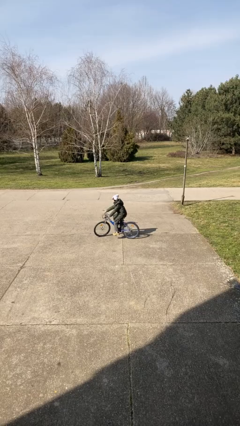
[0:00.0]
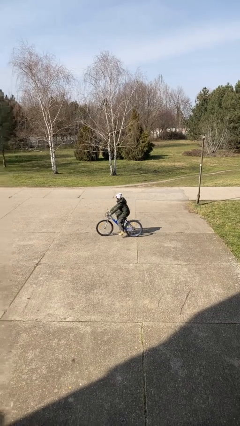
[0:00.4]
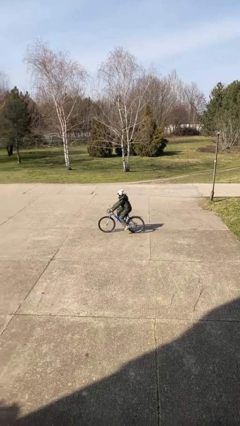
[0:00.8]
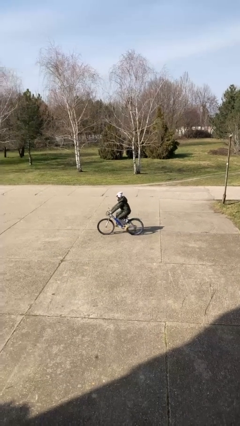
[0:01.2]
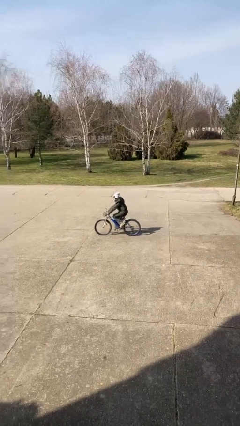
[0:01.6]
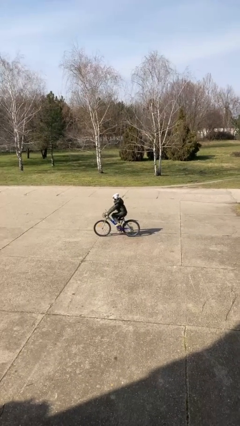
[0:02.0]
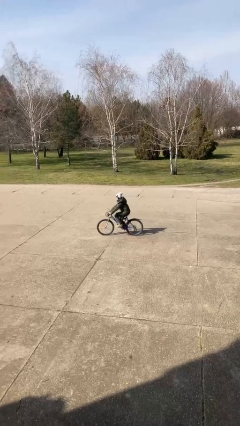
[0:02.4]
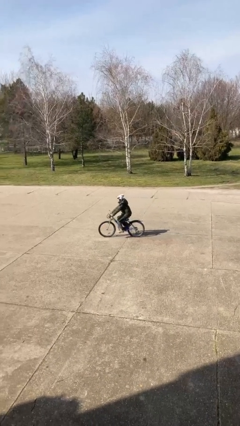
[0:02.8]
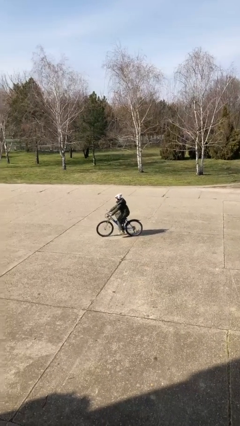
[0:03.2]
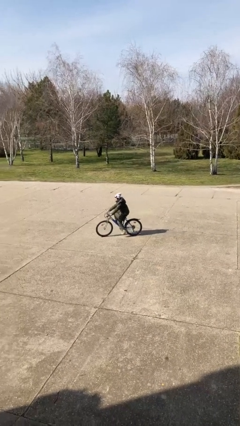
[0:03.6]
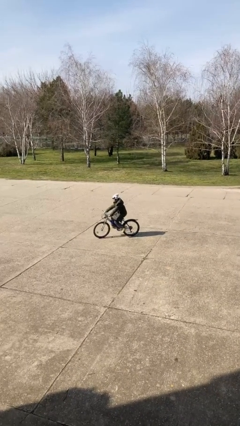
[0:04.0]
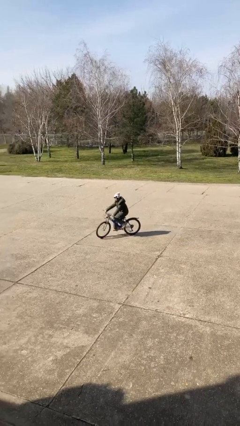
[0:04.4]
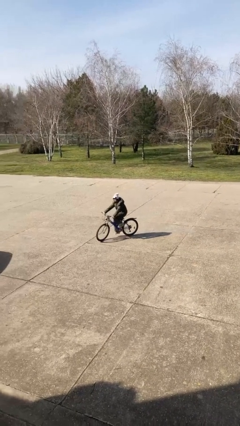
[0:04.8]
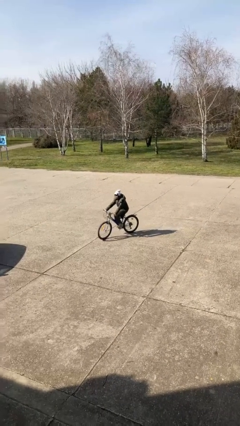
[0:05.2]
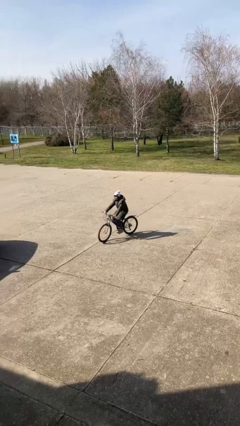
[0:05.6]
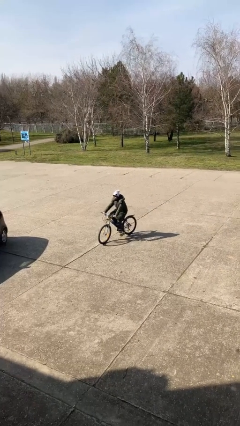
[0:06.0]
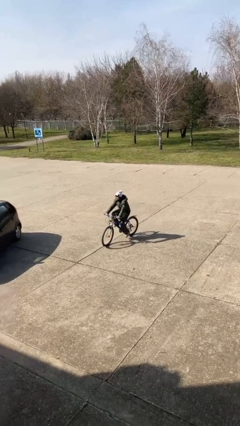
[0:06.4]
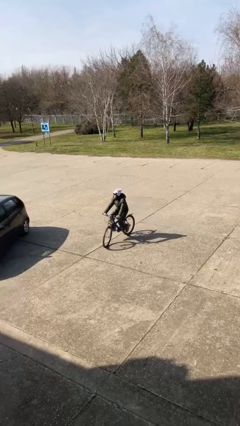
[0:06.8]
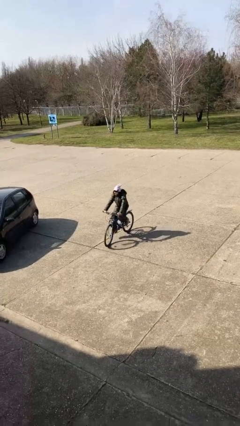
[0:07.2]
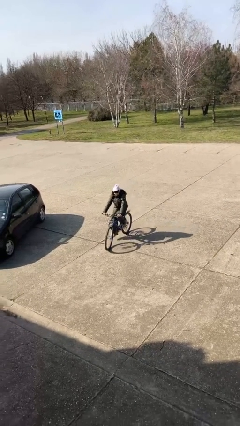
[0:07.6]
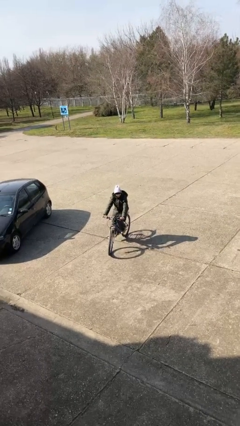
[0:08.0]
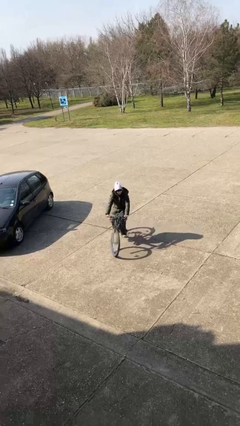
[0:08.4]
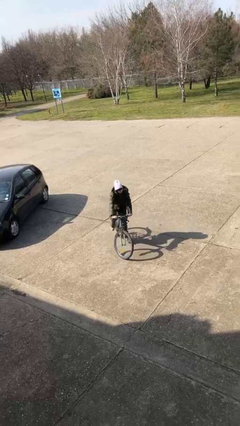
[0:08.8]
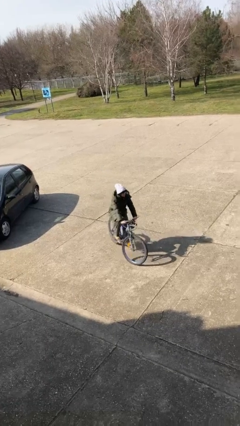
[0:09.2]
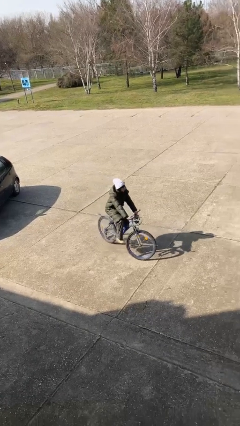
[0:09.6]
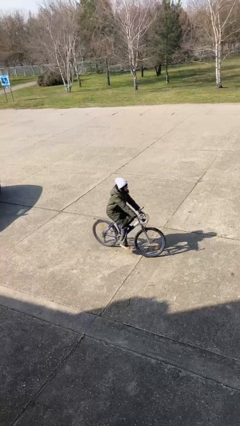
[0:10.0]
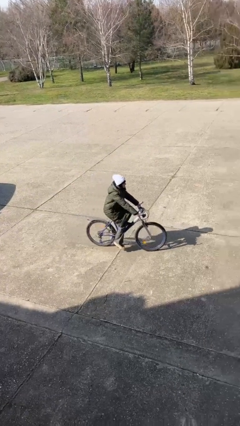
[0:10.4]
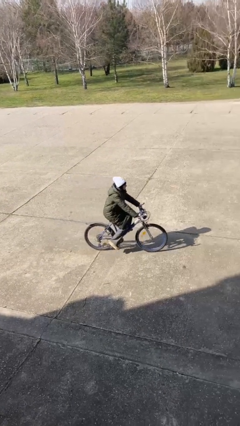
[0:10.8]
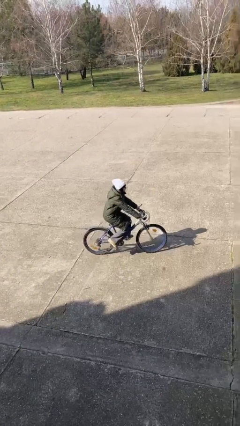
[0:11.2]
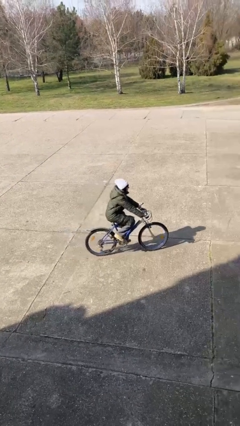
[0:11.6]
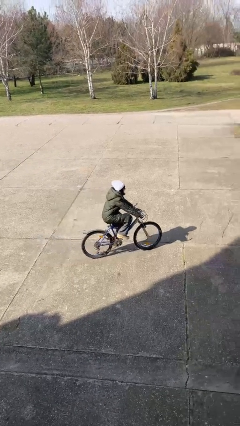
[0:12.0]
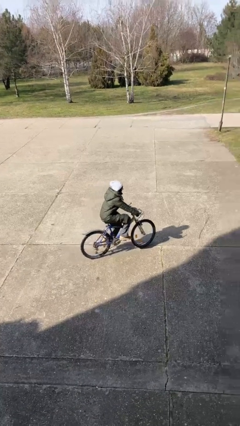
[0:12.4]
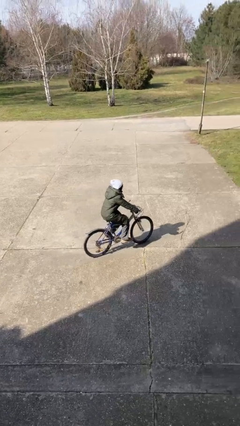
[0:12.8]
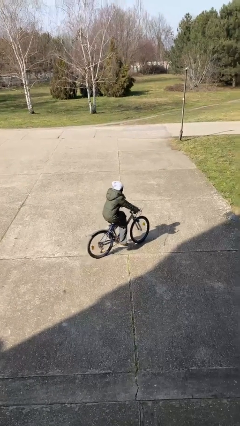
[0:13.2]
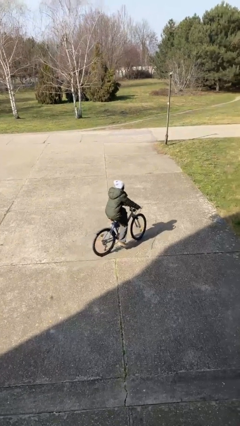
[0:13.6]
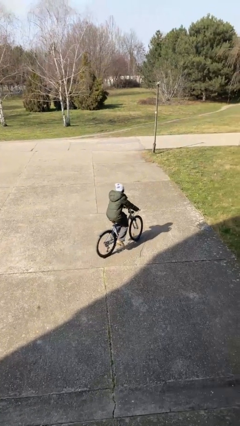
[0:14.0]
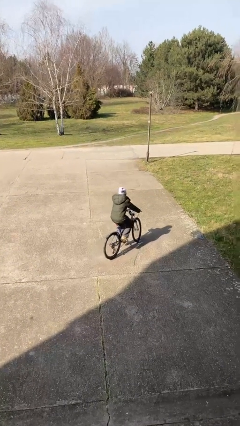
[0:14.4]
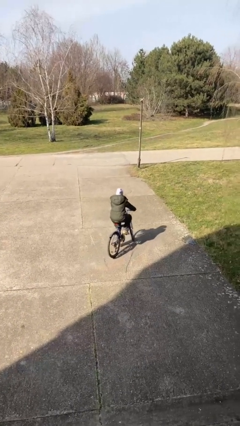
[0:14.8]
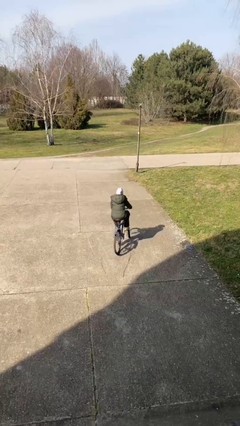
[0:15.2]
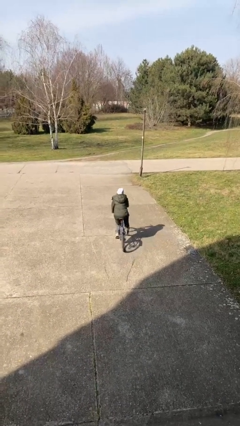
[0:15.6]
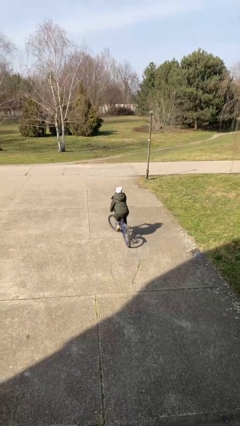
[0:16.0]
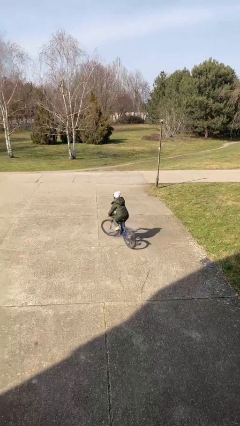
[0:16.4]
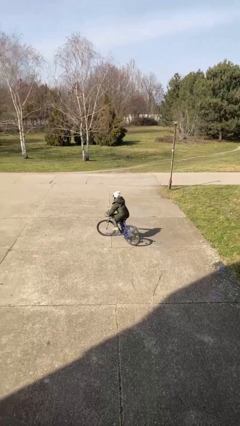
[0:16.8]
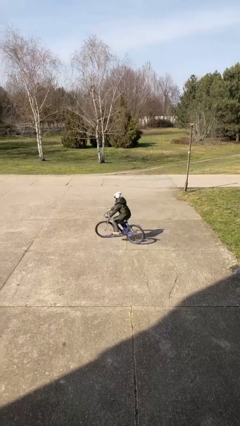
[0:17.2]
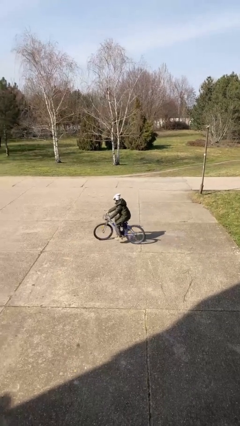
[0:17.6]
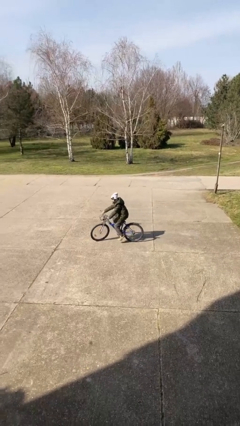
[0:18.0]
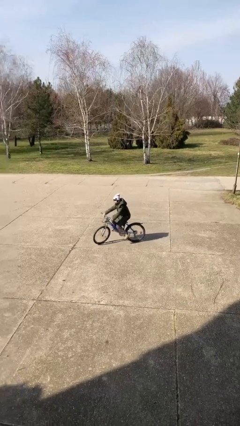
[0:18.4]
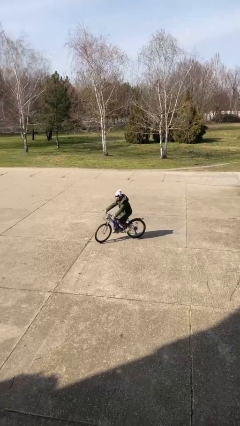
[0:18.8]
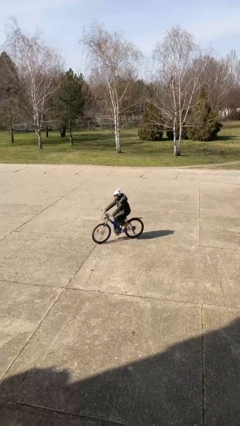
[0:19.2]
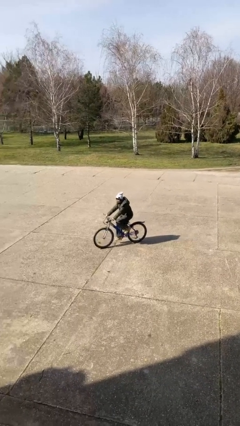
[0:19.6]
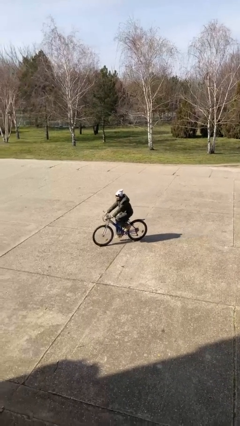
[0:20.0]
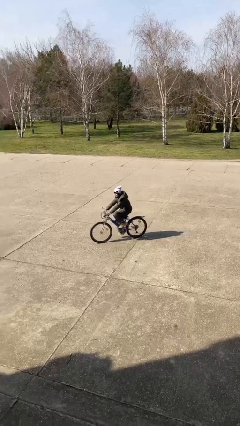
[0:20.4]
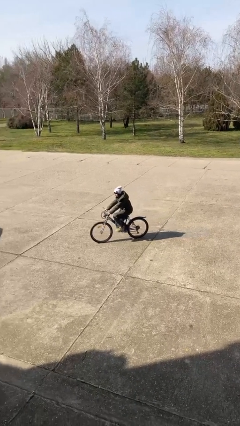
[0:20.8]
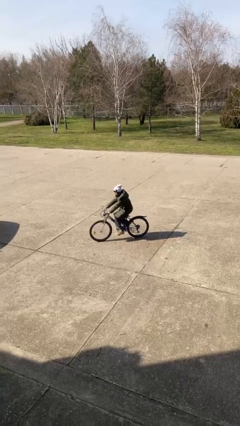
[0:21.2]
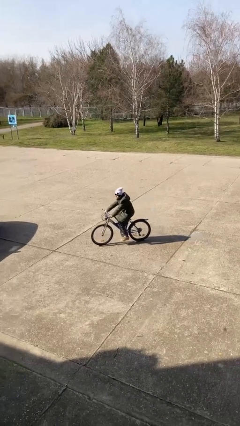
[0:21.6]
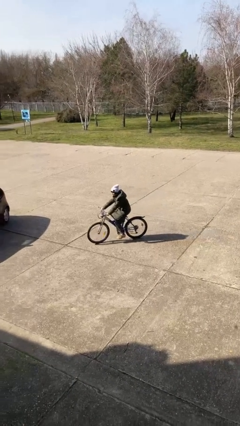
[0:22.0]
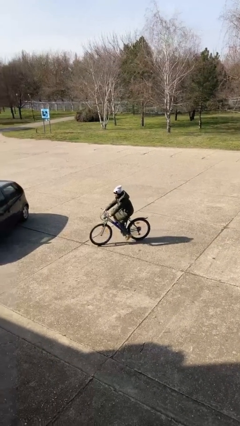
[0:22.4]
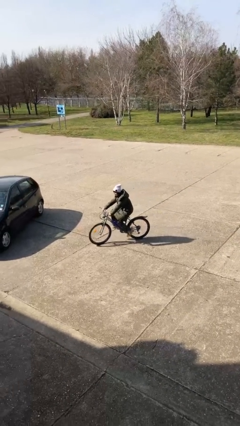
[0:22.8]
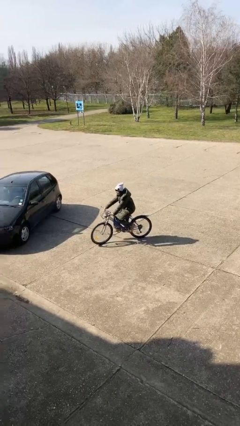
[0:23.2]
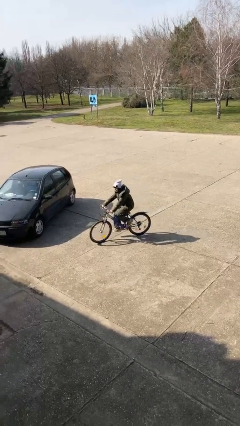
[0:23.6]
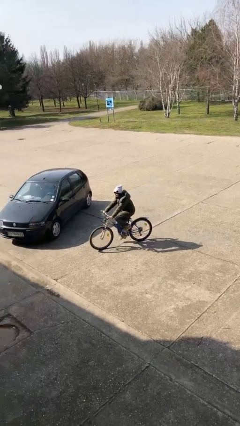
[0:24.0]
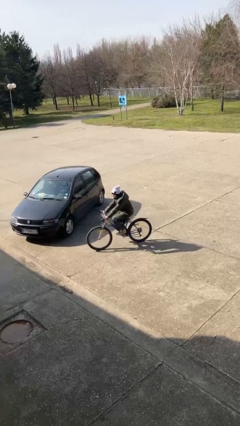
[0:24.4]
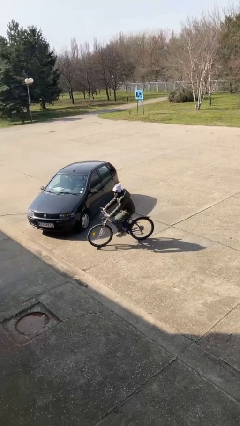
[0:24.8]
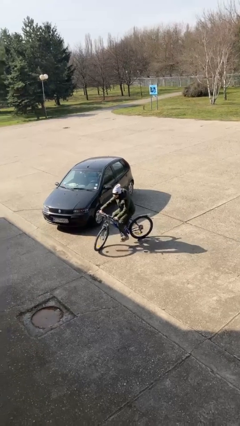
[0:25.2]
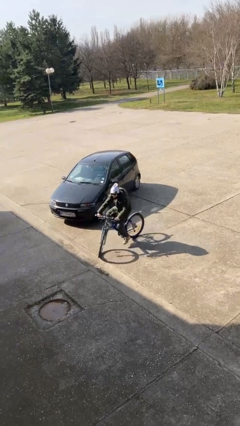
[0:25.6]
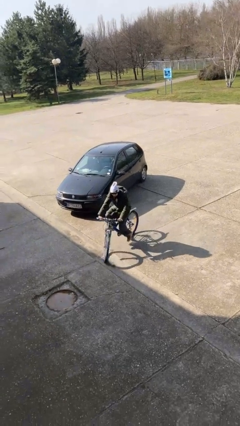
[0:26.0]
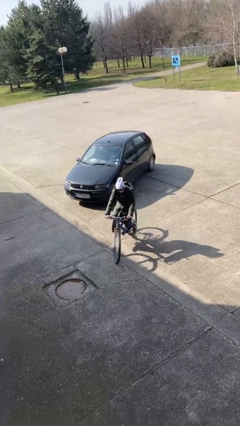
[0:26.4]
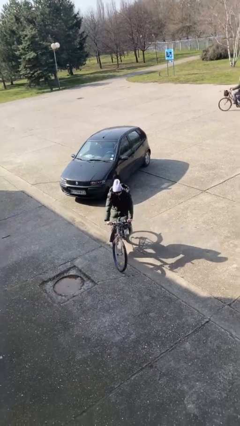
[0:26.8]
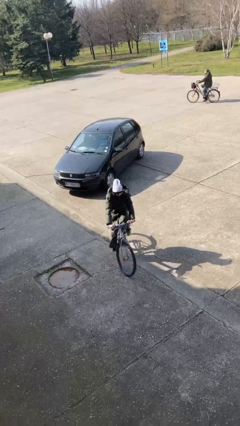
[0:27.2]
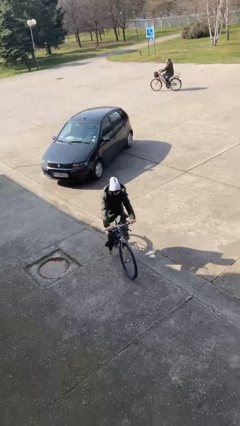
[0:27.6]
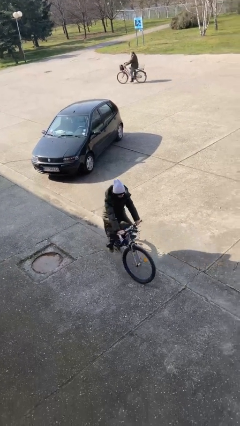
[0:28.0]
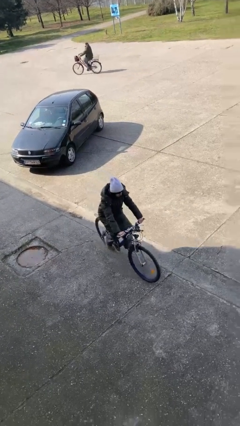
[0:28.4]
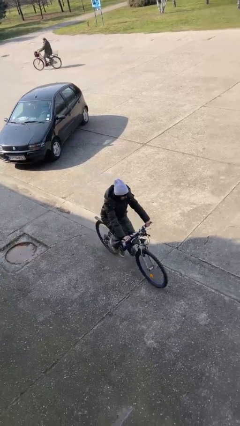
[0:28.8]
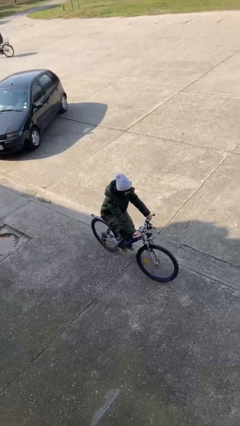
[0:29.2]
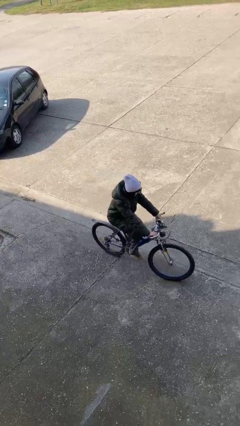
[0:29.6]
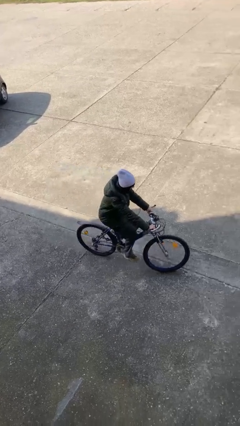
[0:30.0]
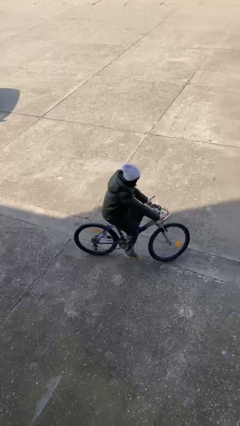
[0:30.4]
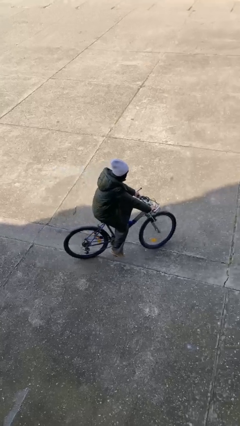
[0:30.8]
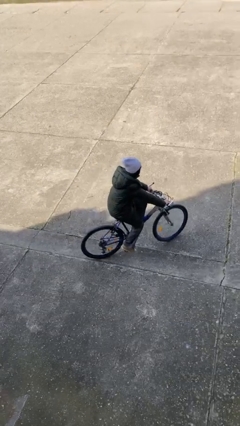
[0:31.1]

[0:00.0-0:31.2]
person rides bicycle

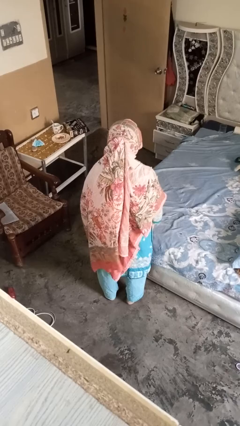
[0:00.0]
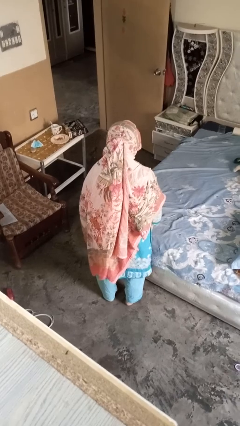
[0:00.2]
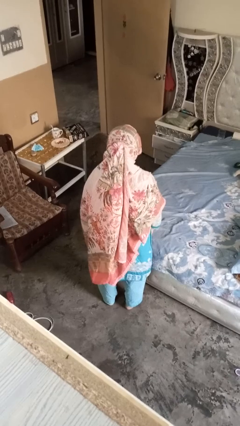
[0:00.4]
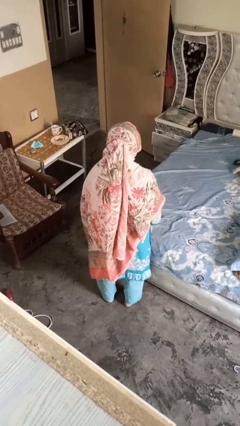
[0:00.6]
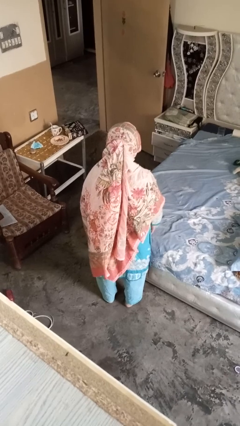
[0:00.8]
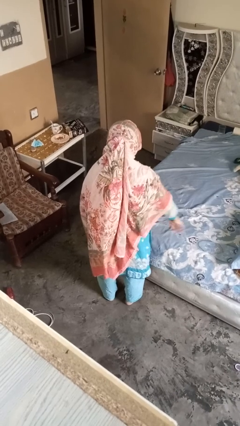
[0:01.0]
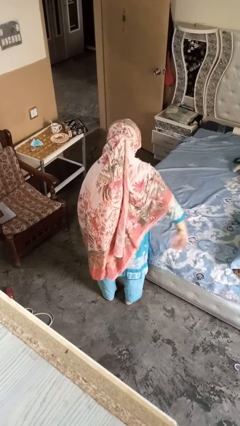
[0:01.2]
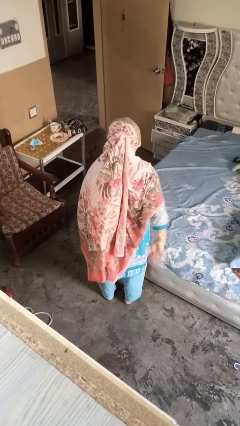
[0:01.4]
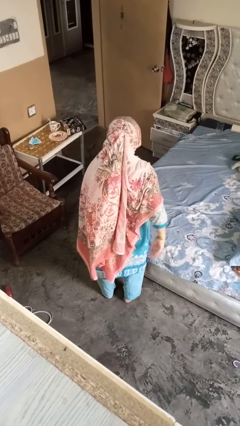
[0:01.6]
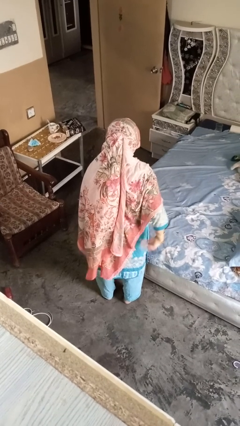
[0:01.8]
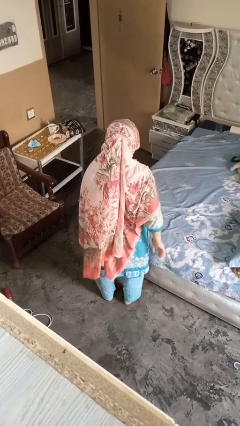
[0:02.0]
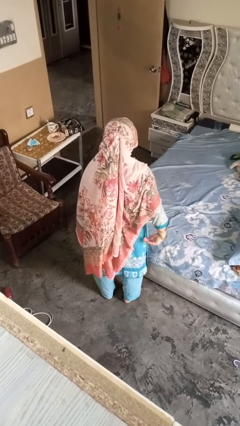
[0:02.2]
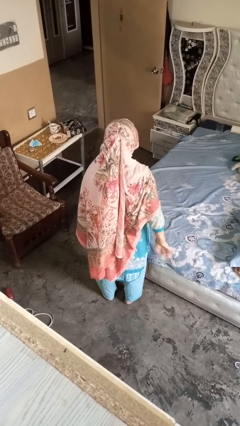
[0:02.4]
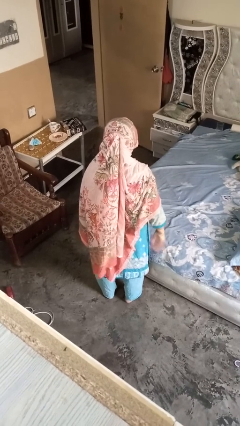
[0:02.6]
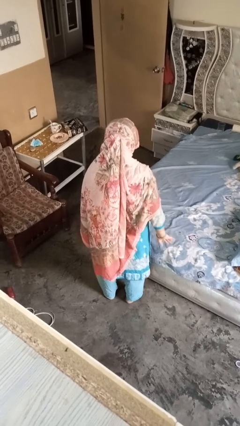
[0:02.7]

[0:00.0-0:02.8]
person gestures behind me
